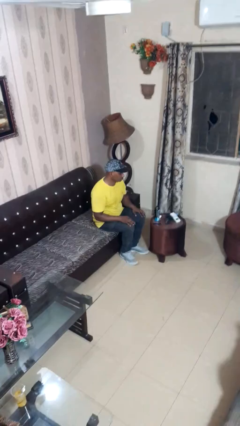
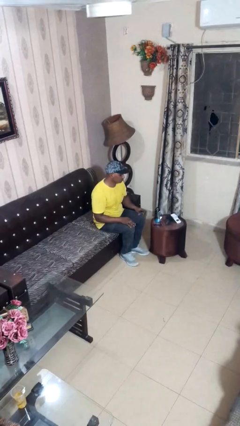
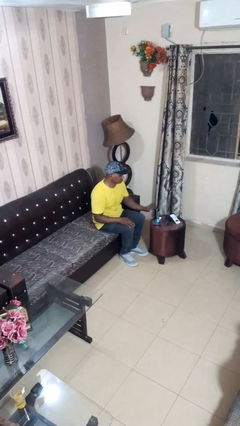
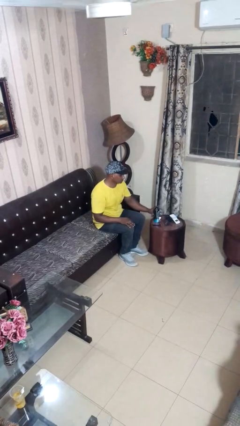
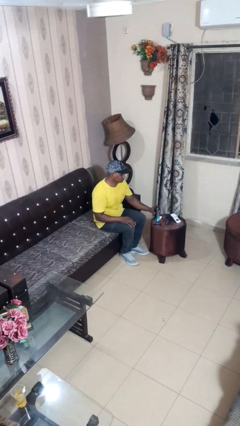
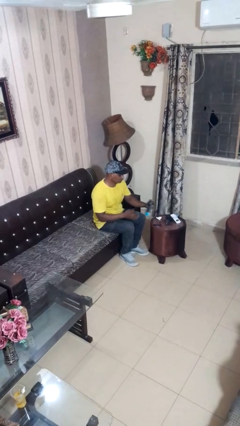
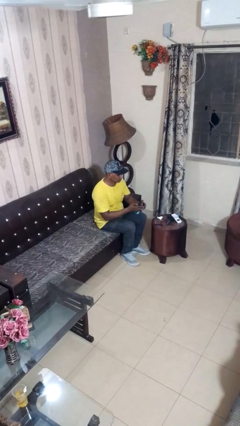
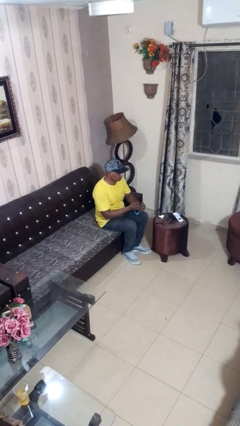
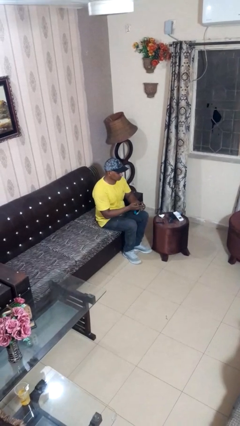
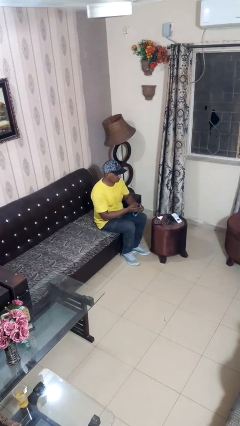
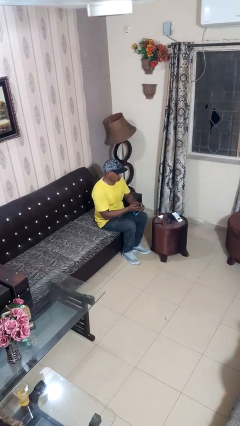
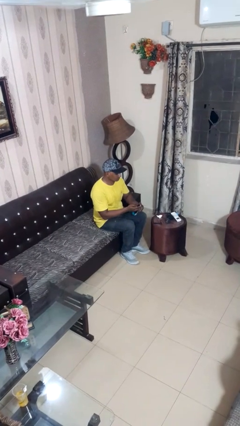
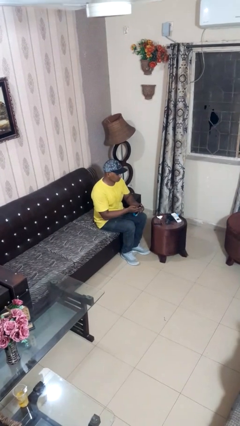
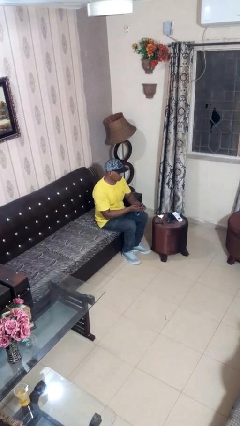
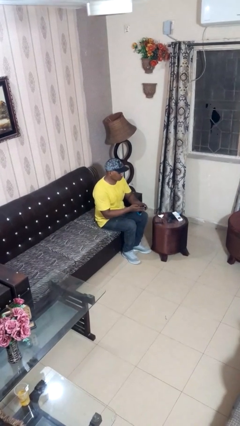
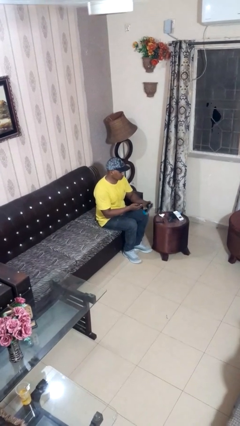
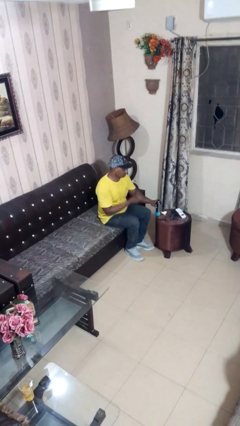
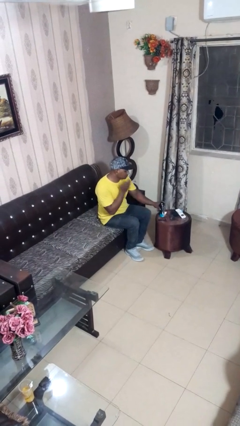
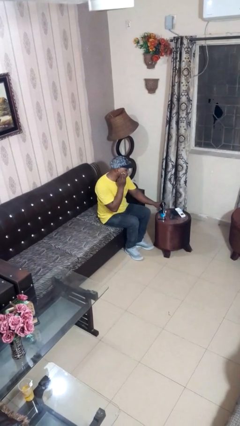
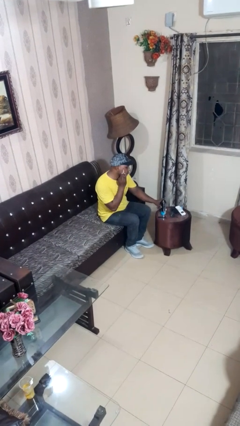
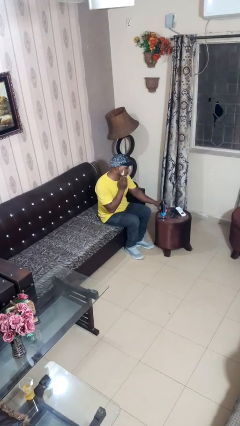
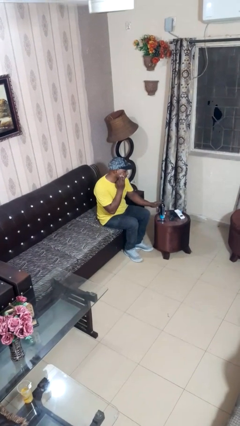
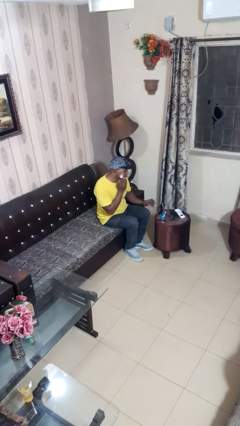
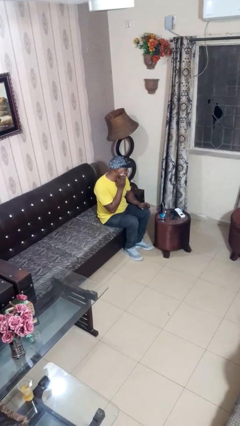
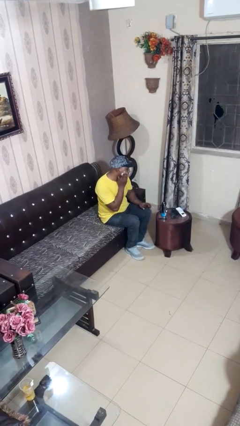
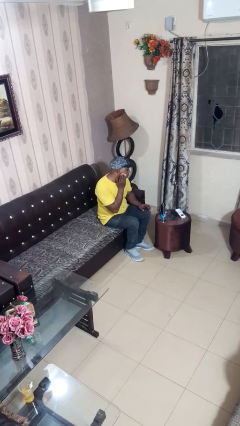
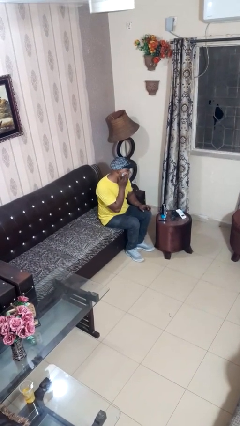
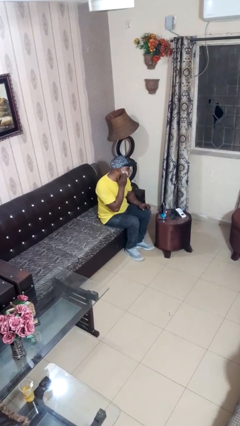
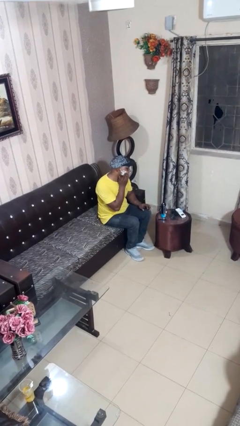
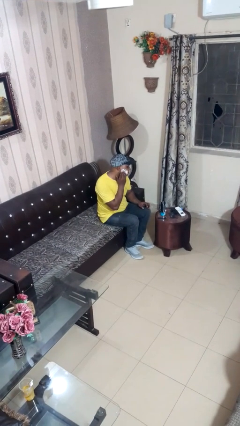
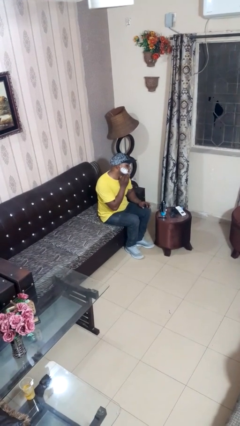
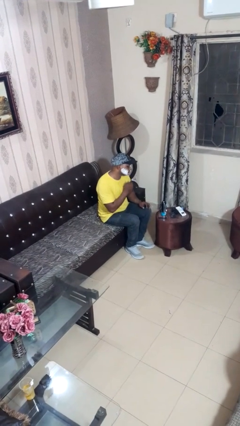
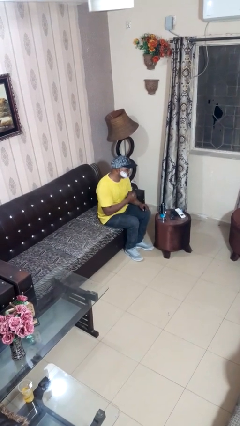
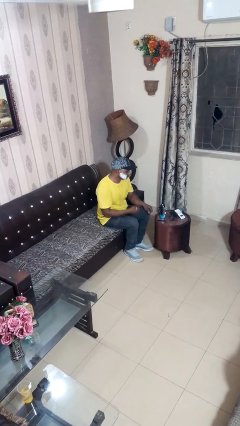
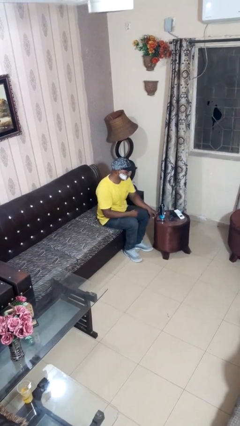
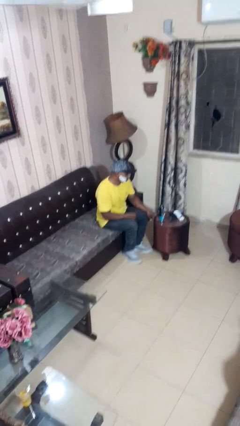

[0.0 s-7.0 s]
person applies shaving cream

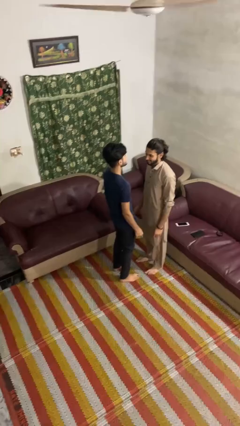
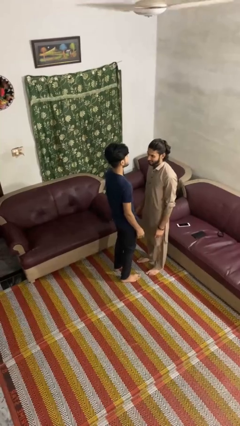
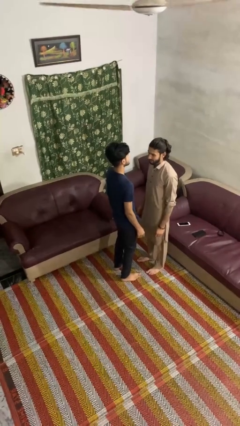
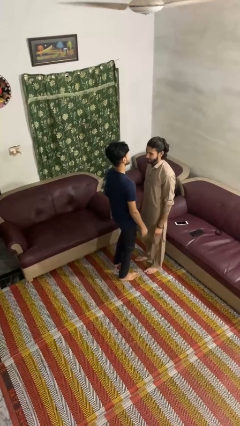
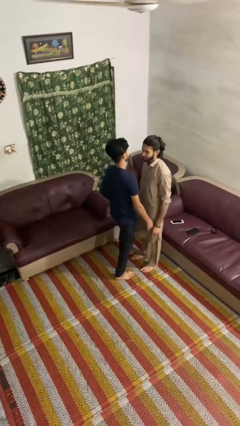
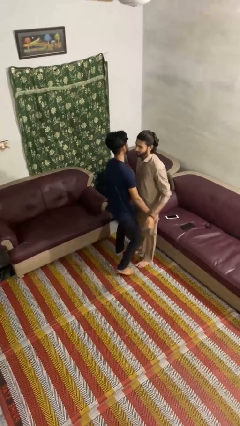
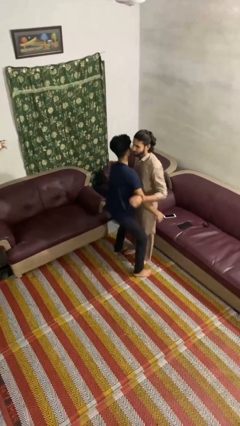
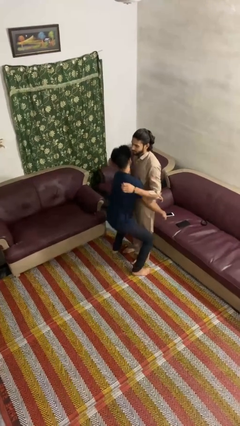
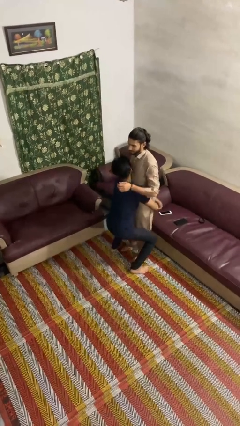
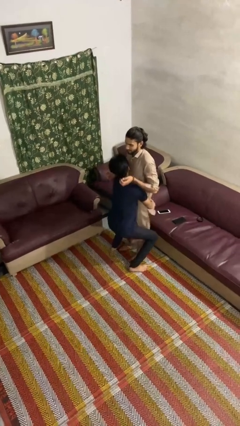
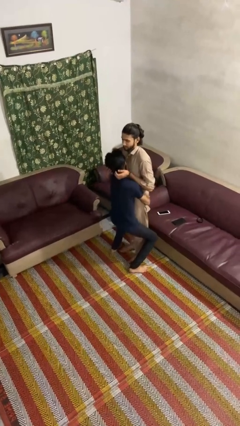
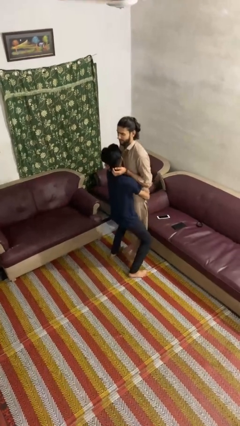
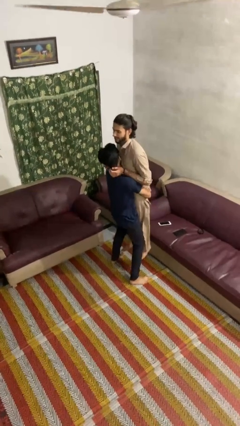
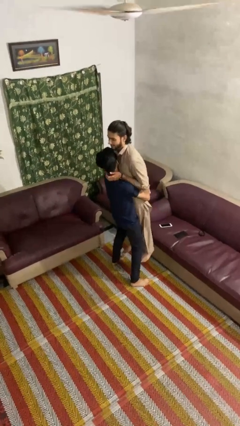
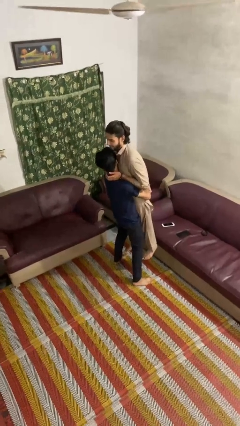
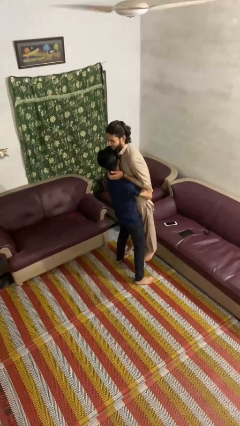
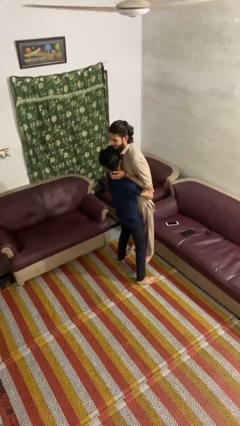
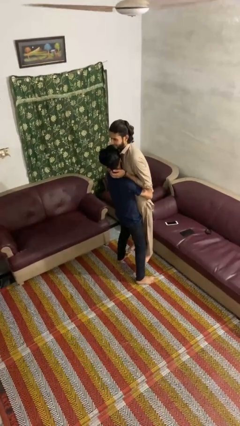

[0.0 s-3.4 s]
person picks up person

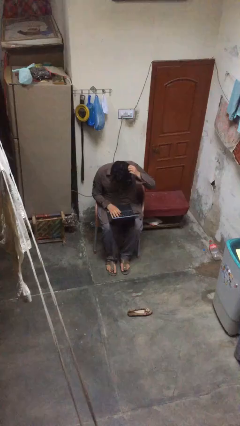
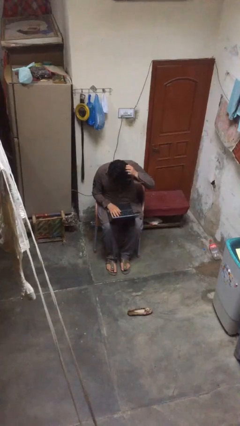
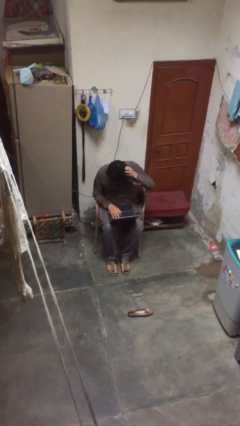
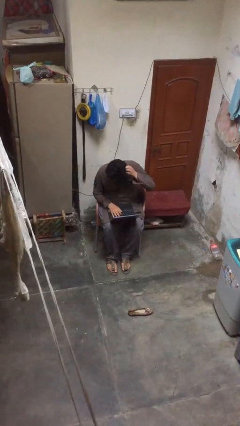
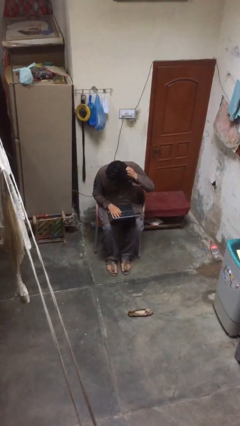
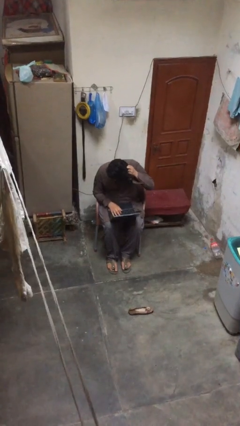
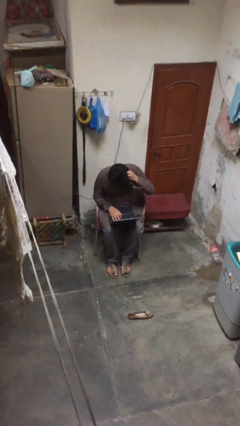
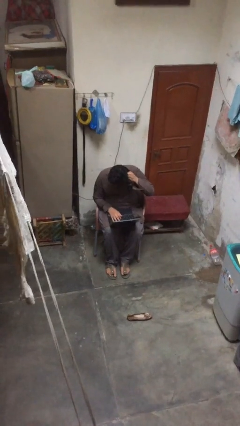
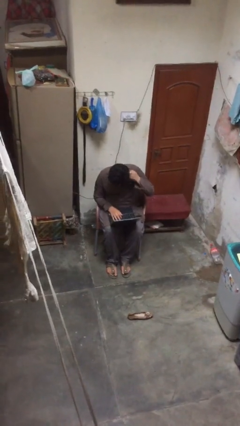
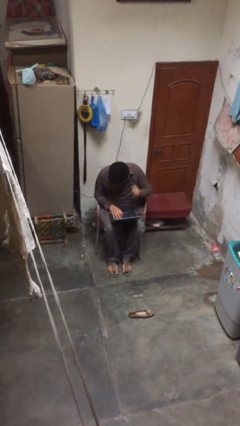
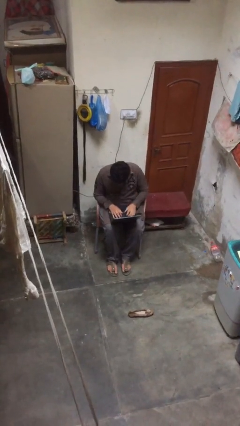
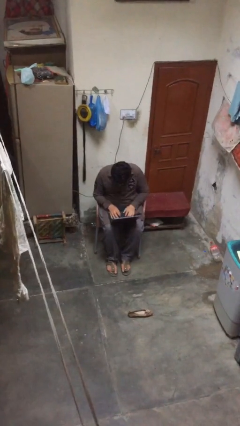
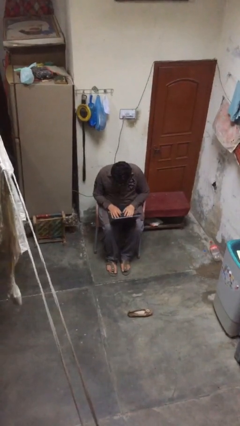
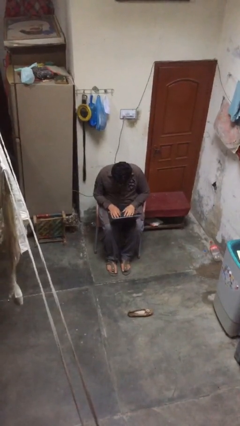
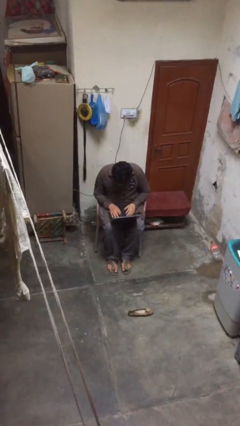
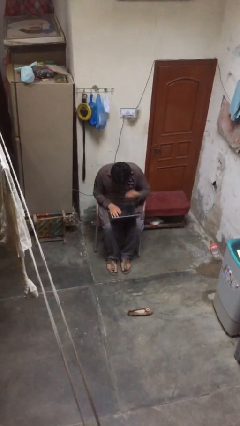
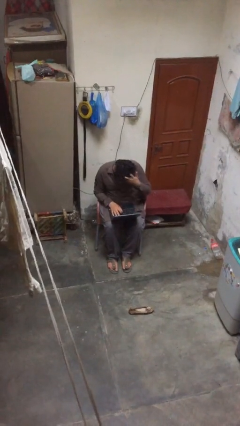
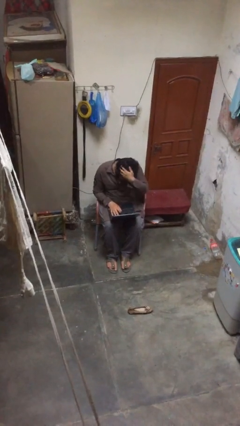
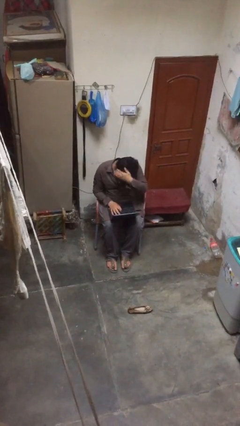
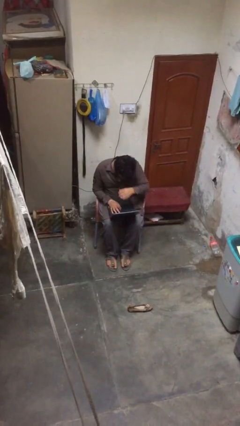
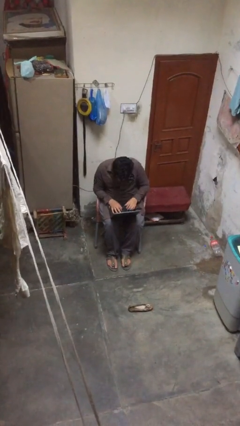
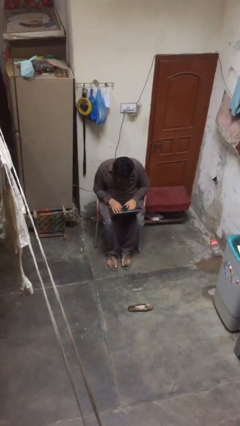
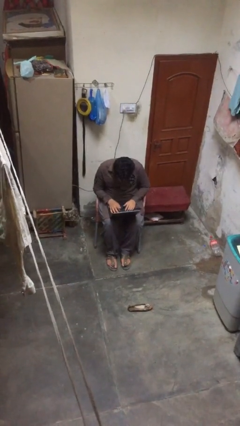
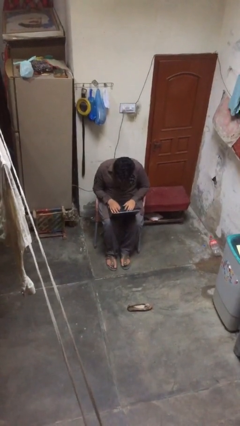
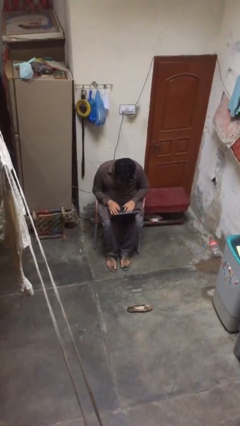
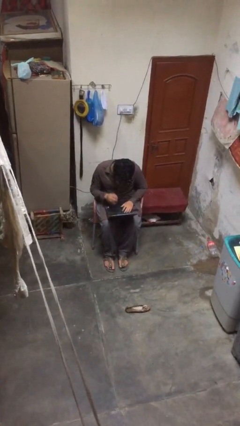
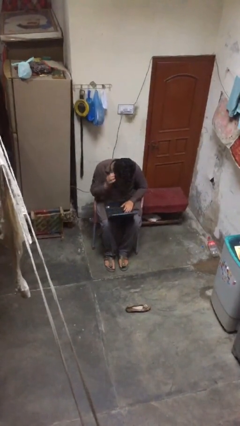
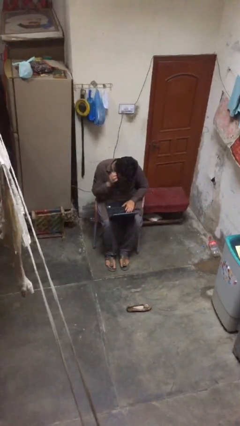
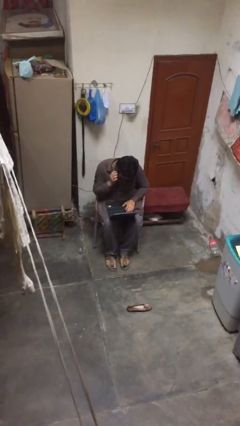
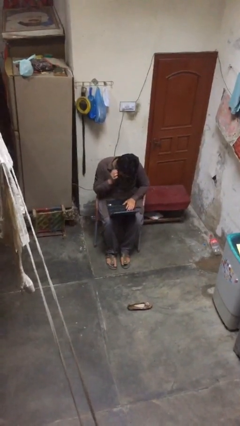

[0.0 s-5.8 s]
person interacts with laptop

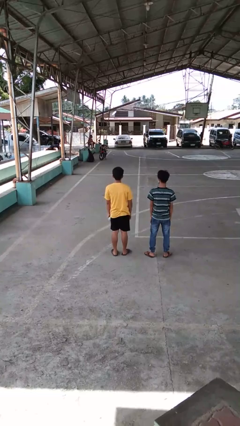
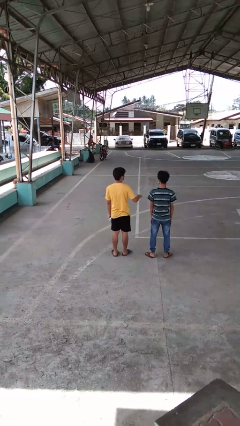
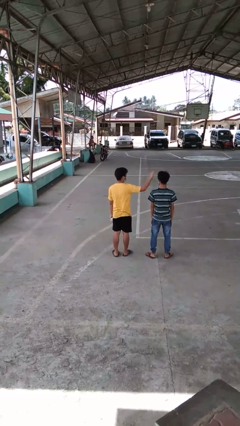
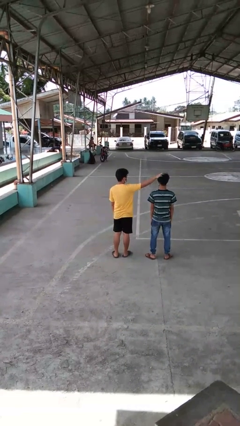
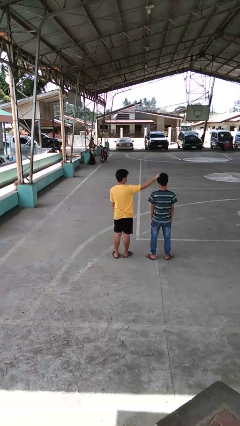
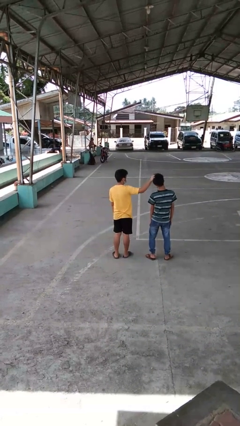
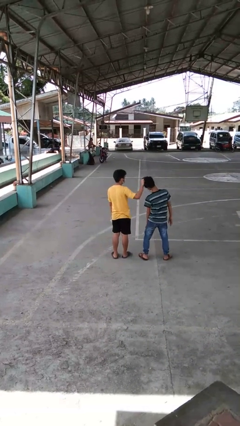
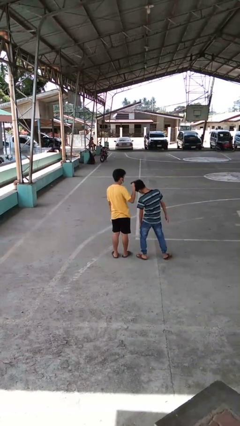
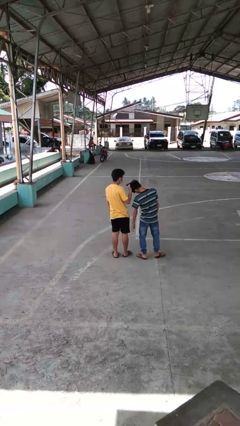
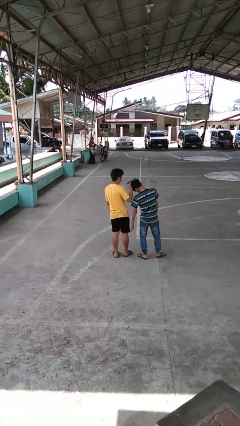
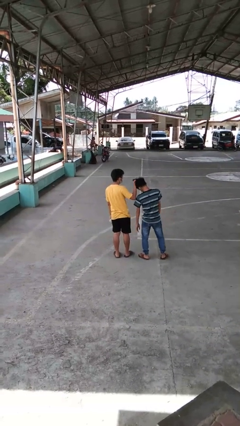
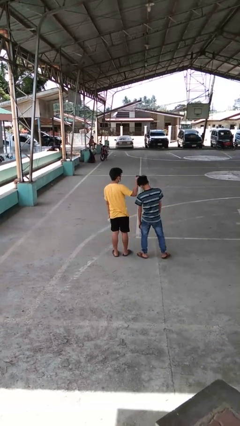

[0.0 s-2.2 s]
person grabs person by hair
